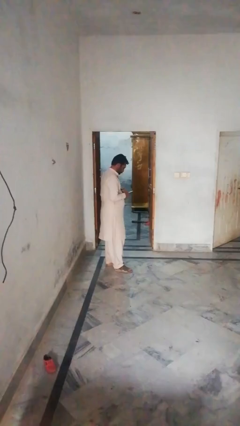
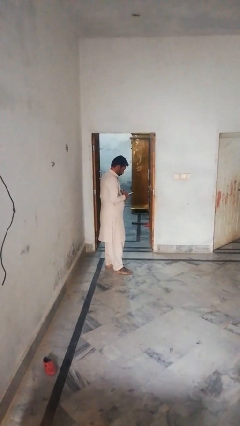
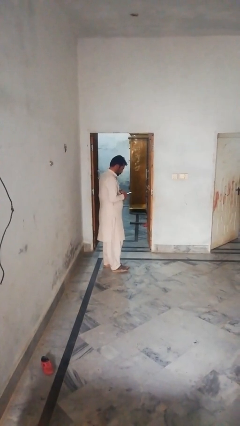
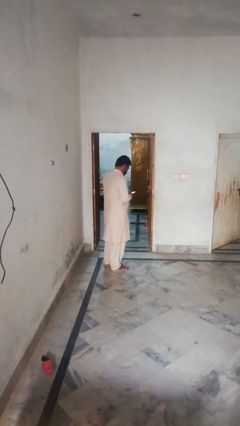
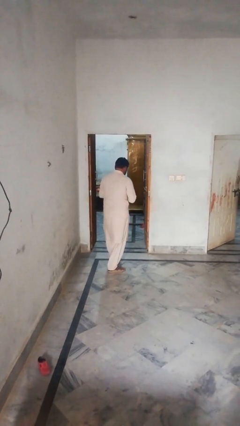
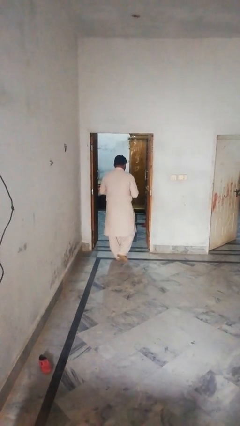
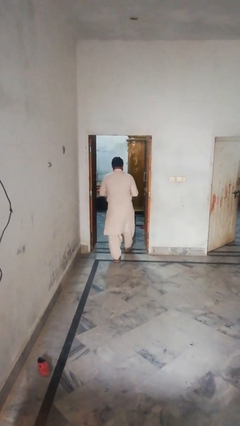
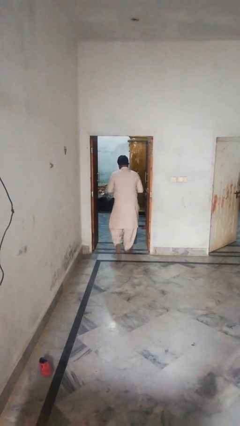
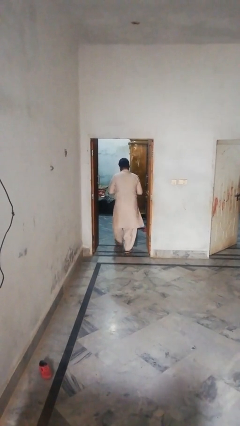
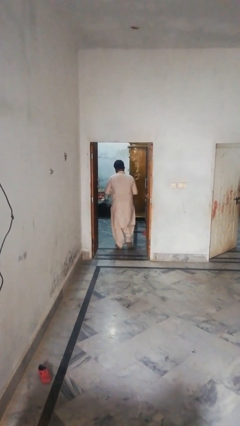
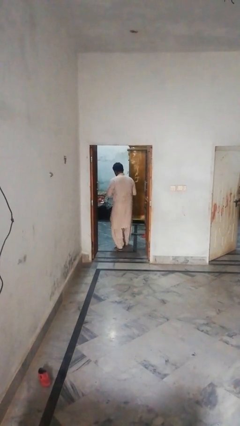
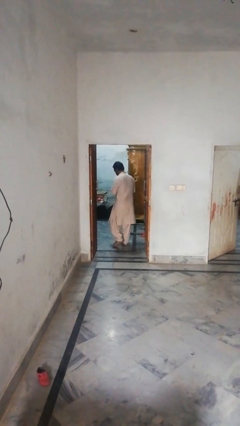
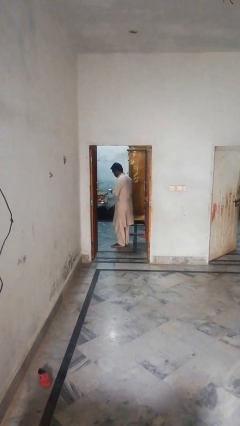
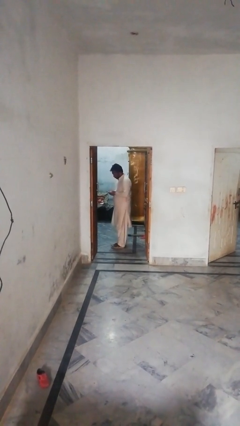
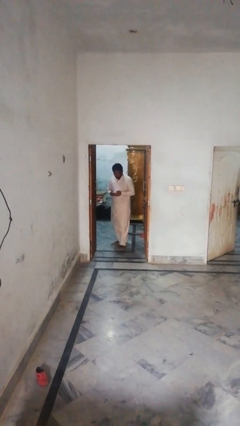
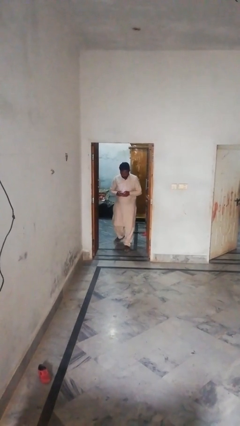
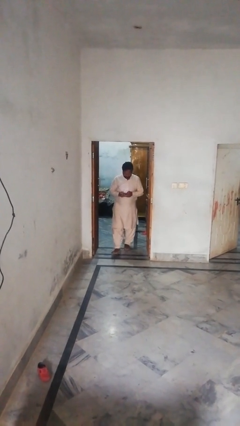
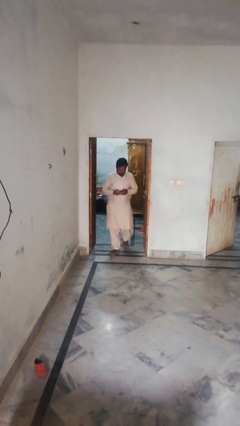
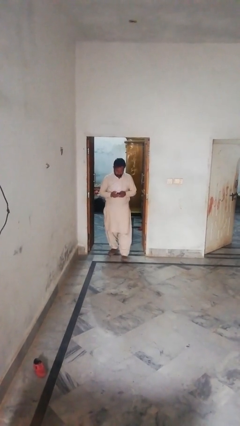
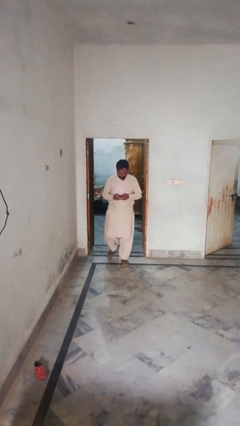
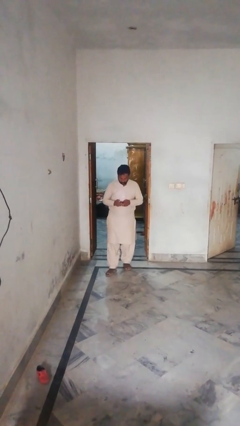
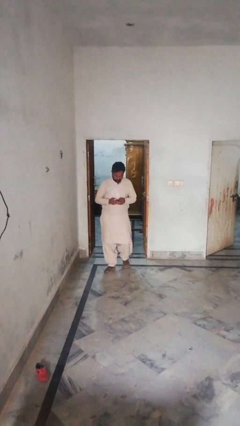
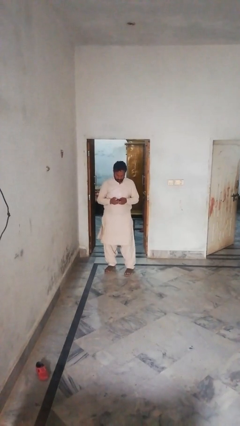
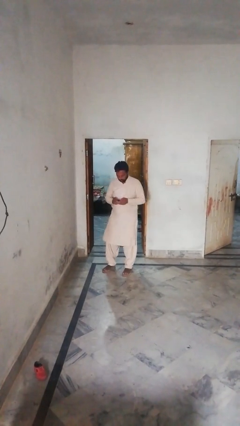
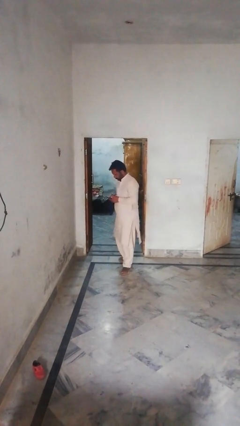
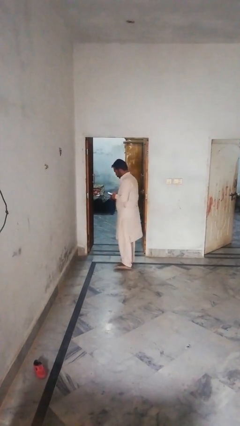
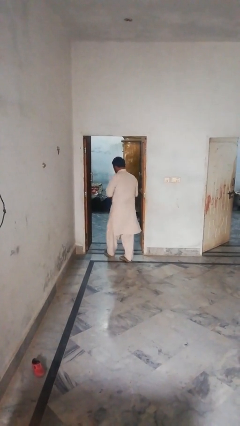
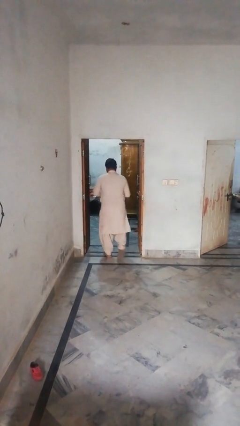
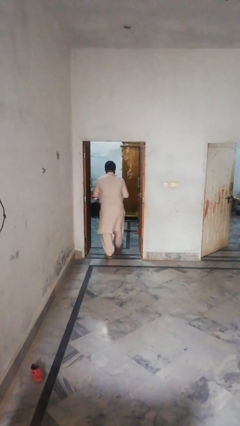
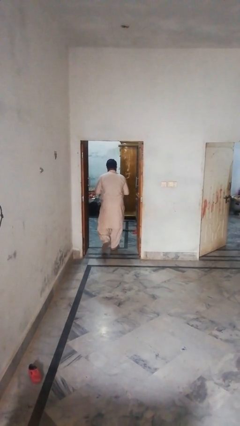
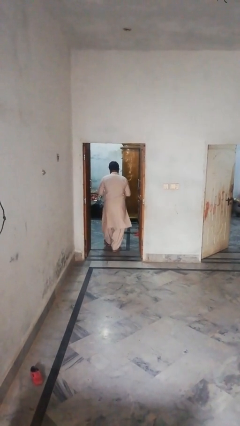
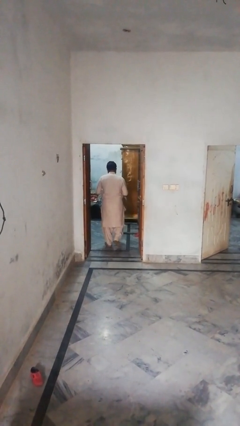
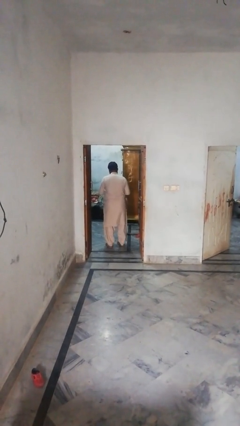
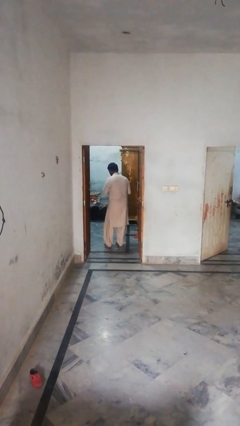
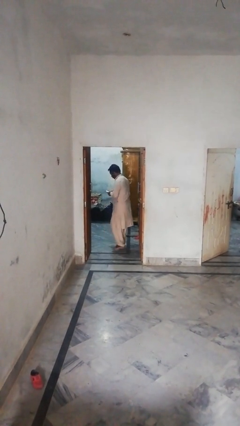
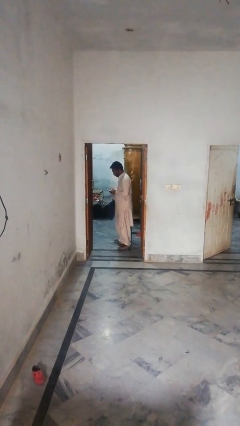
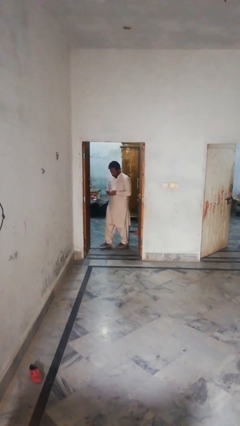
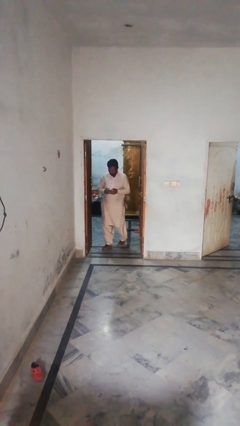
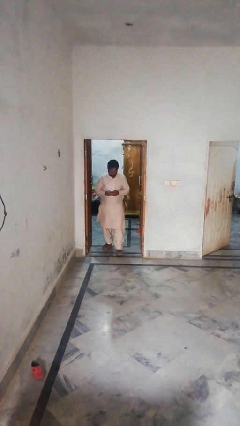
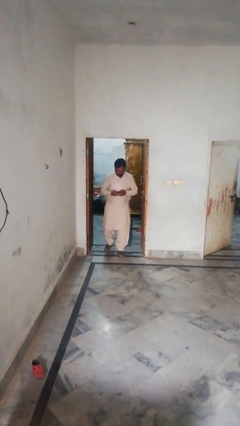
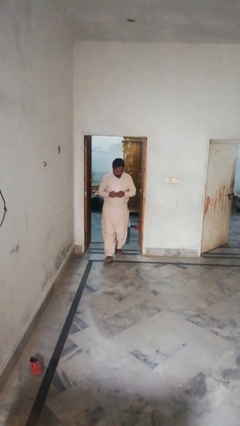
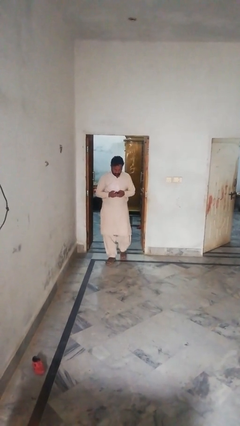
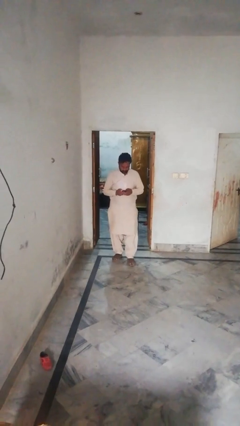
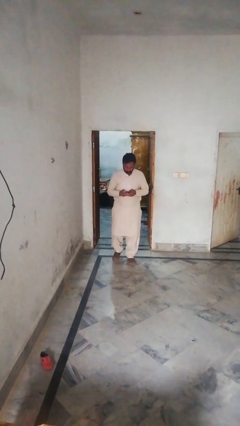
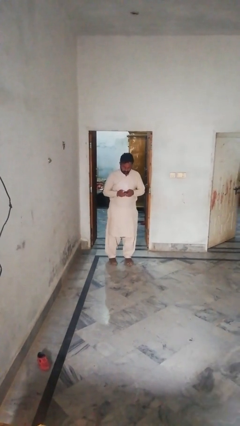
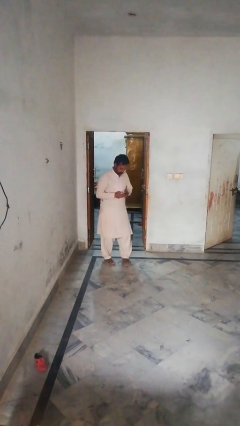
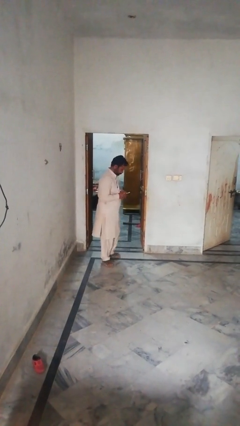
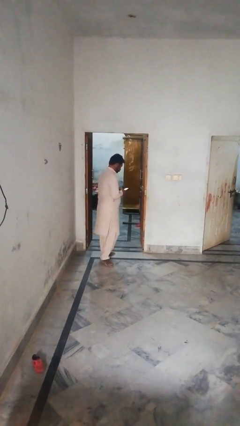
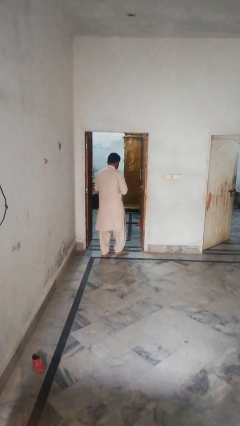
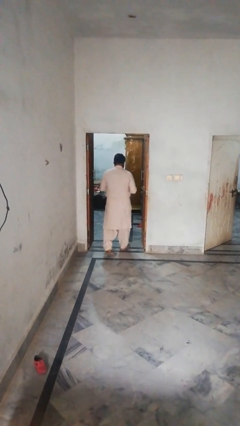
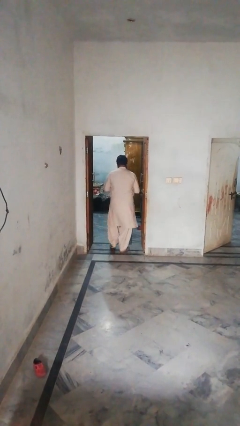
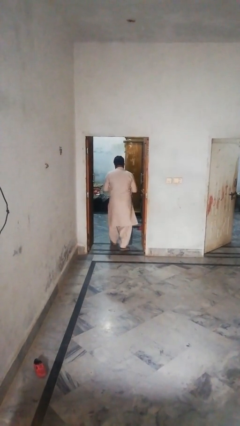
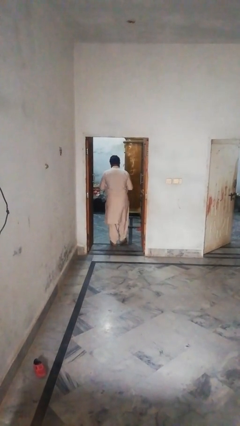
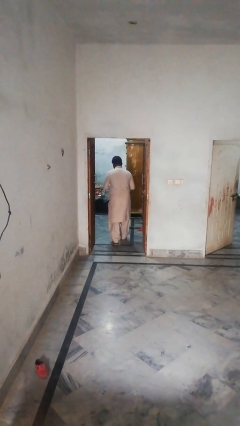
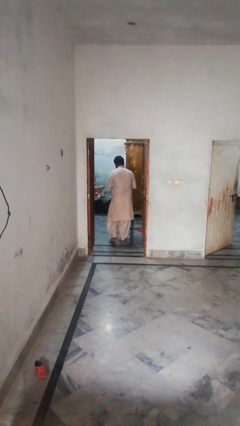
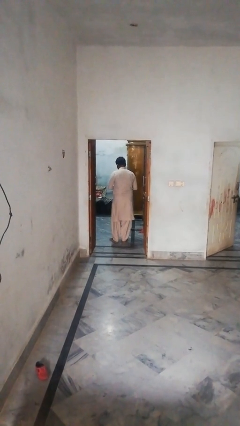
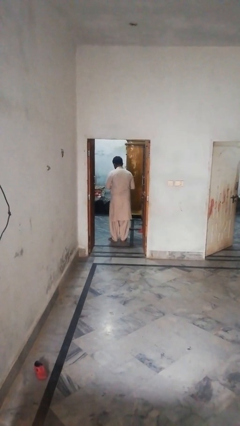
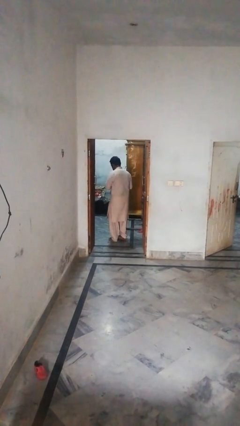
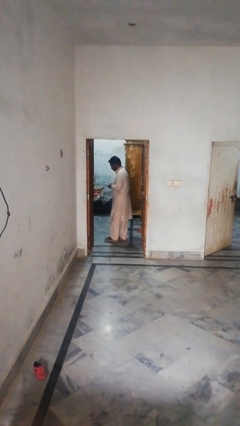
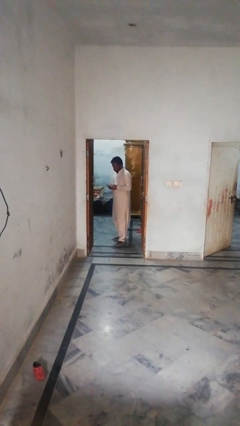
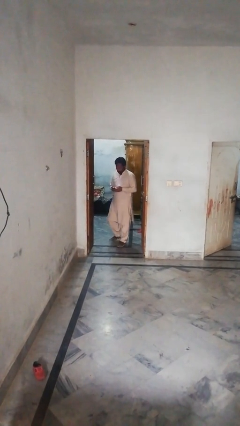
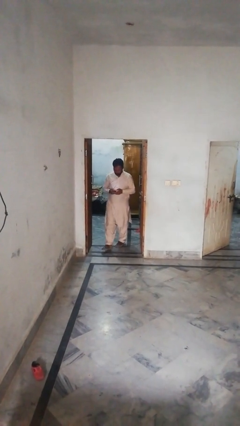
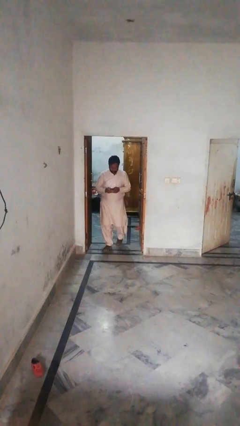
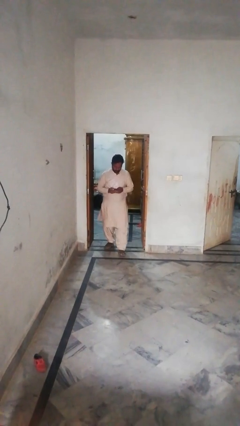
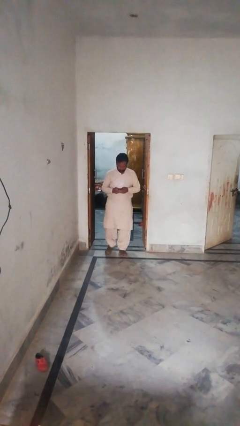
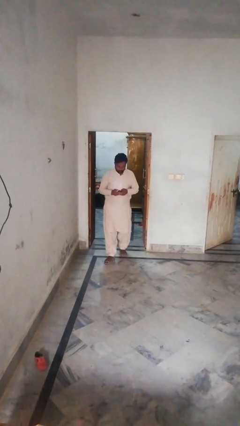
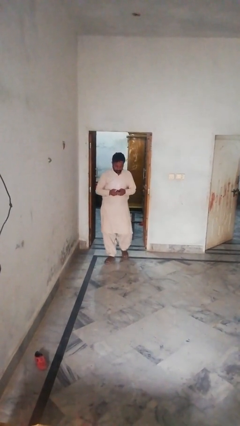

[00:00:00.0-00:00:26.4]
person texts on phone

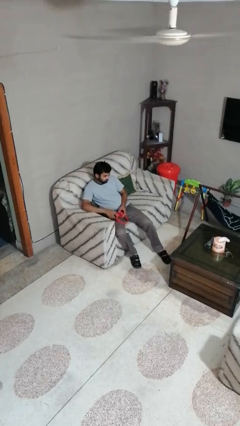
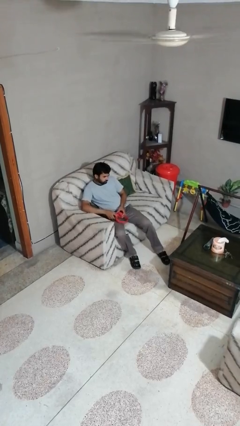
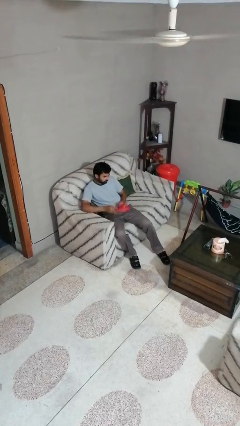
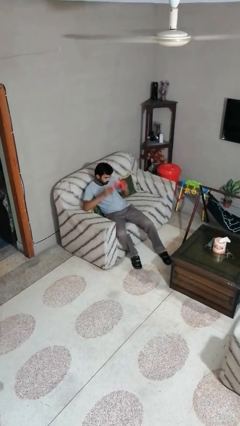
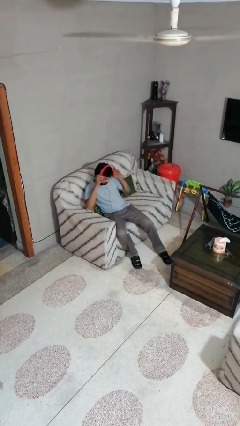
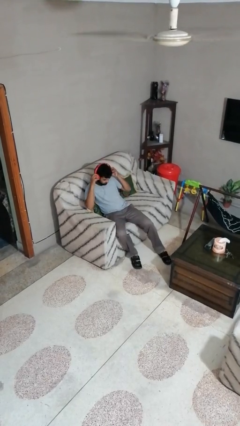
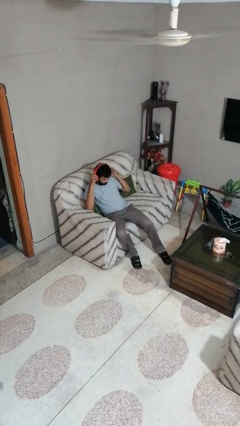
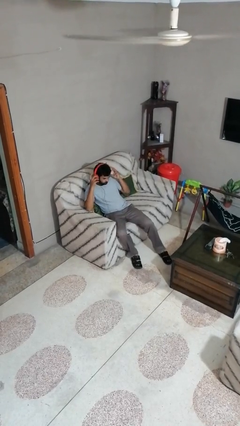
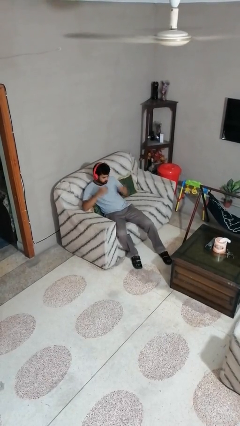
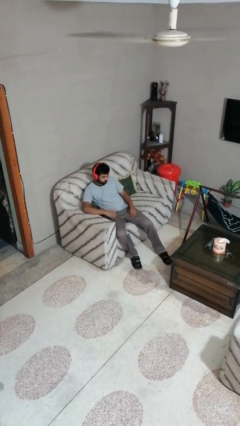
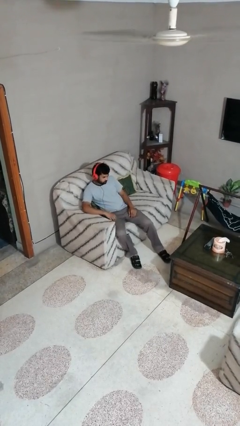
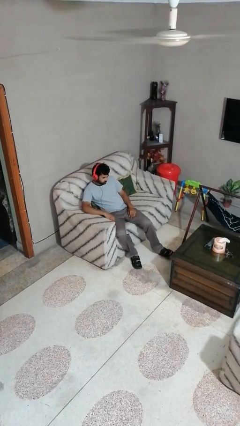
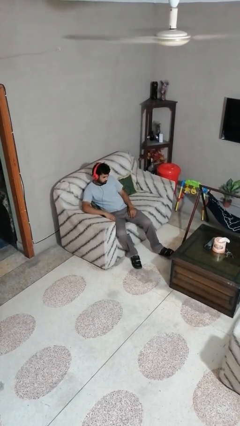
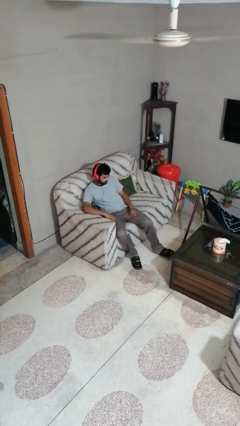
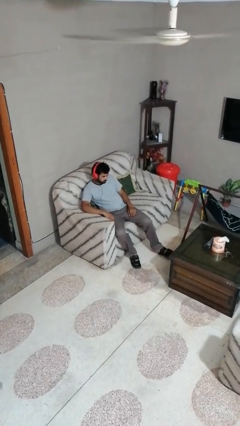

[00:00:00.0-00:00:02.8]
person puts on headphones

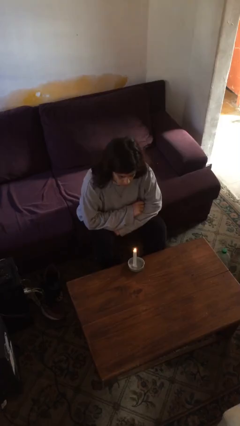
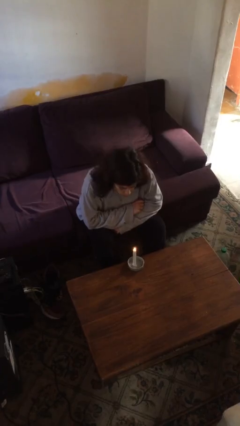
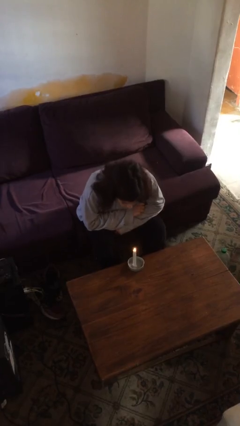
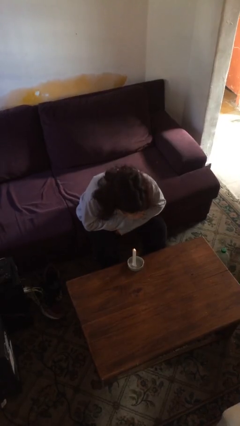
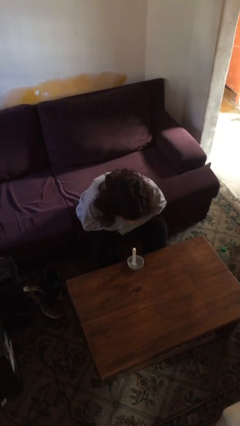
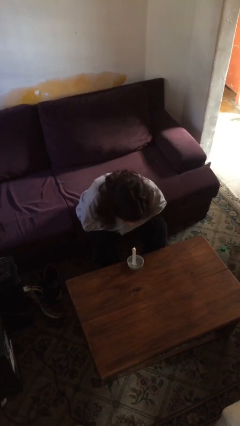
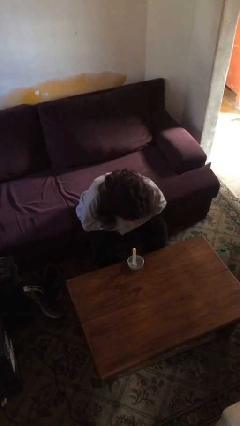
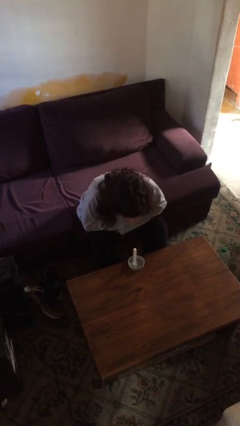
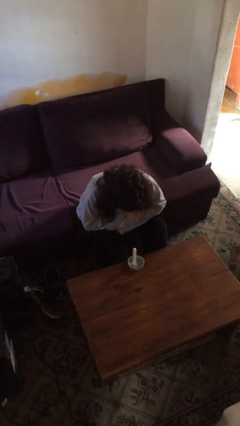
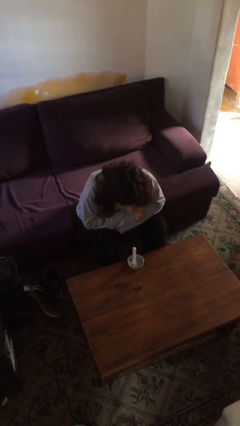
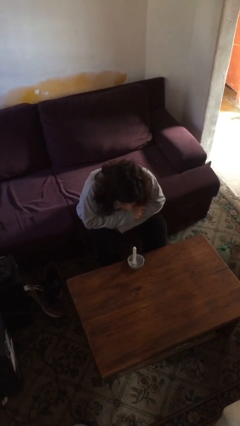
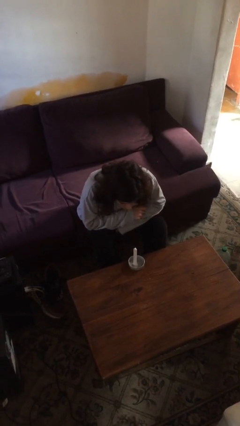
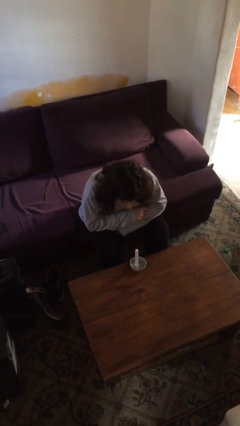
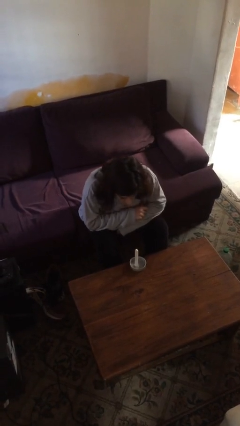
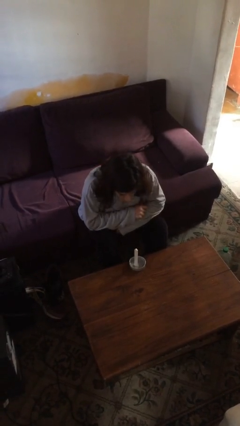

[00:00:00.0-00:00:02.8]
person extinguishes candle
